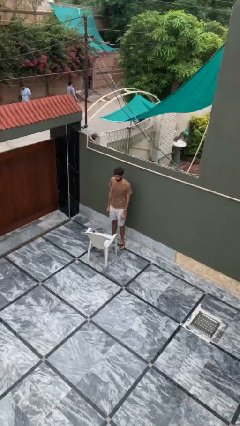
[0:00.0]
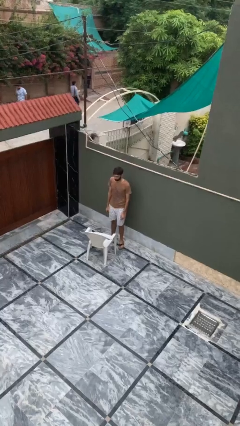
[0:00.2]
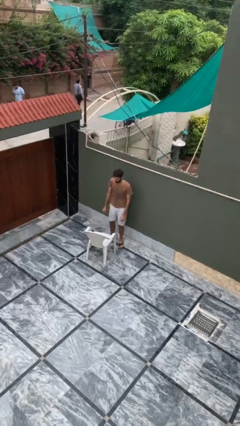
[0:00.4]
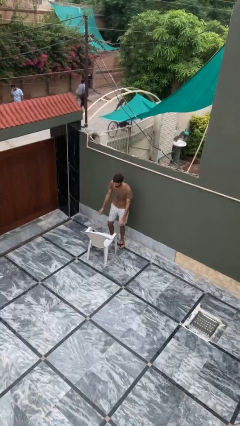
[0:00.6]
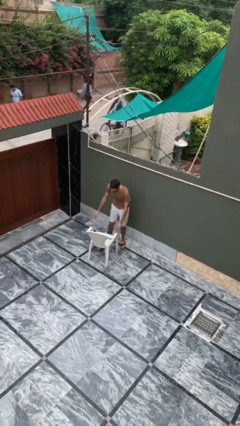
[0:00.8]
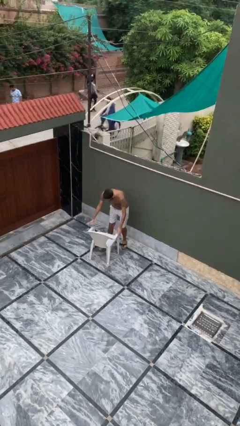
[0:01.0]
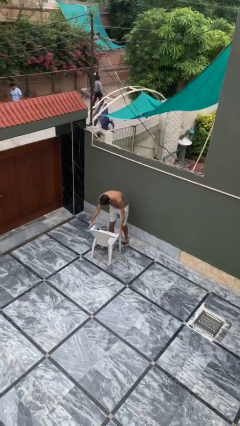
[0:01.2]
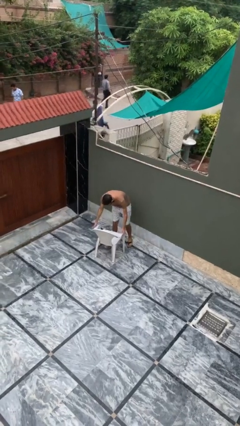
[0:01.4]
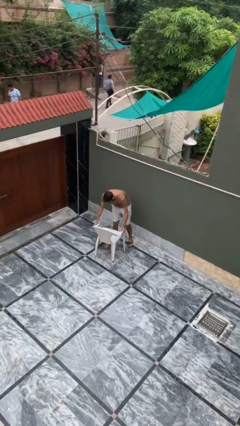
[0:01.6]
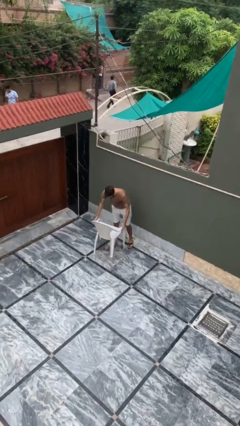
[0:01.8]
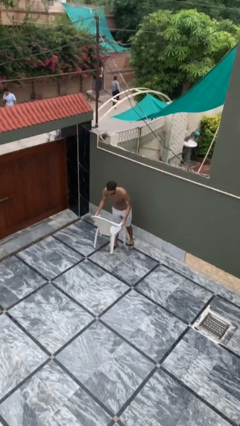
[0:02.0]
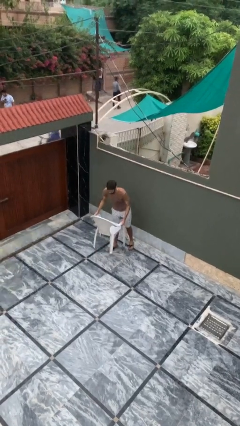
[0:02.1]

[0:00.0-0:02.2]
person picks up object from floor

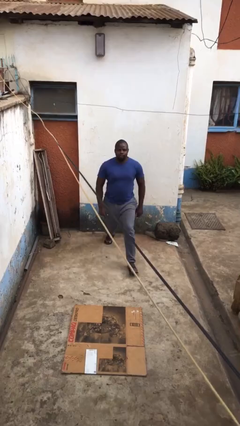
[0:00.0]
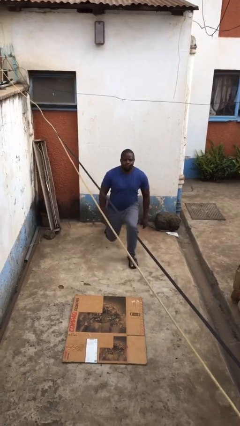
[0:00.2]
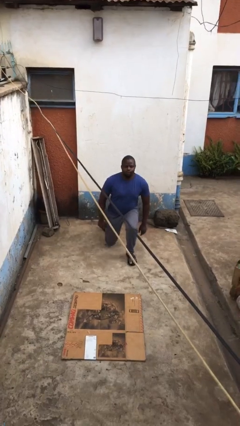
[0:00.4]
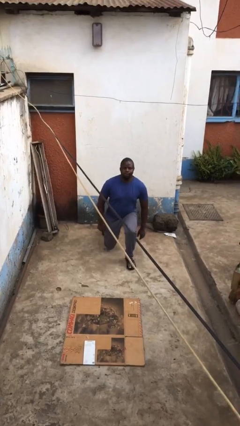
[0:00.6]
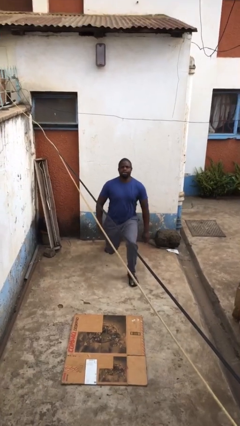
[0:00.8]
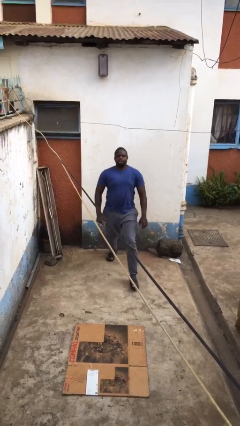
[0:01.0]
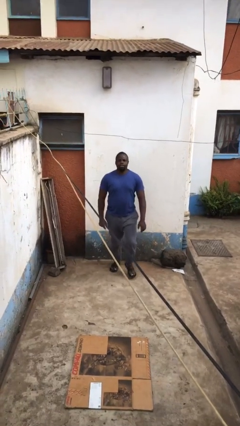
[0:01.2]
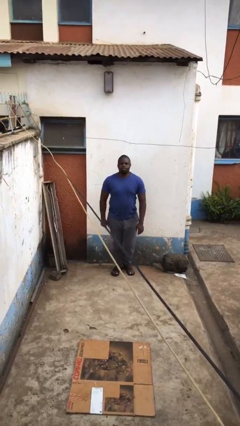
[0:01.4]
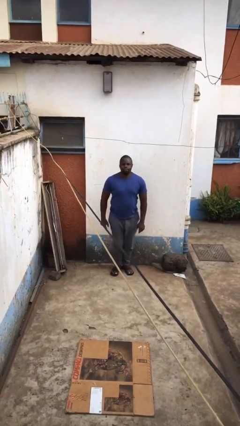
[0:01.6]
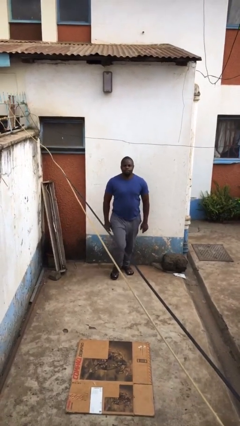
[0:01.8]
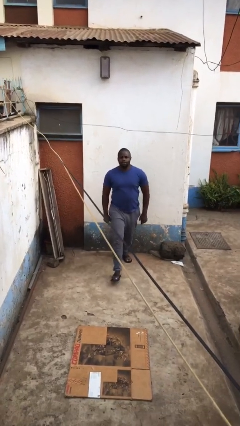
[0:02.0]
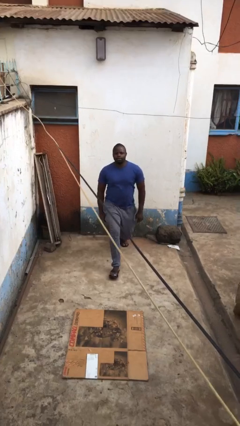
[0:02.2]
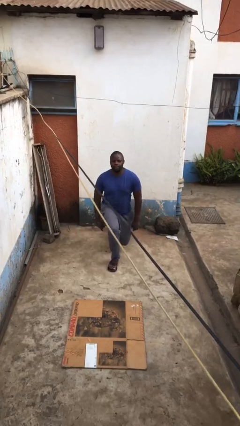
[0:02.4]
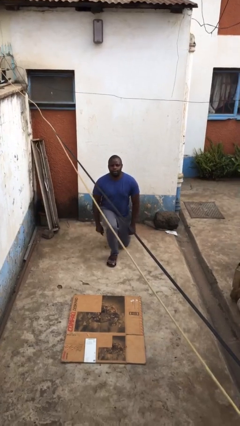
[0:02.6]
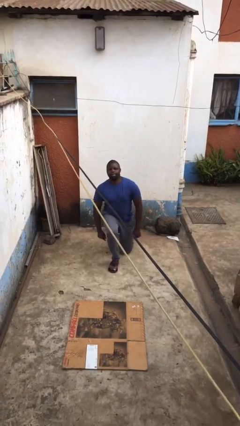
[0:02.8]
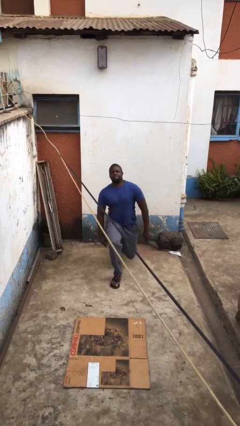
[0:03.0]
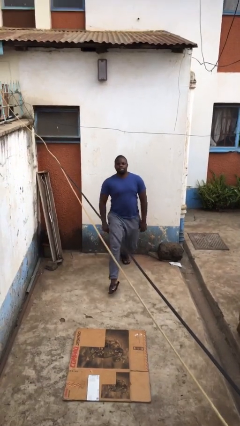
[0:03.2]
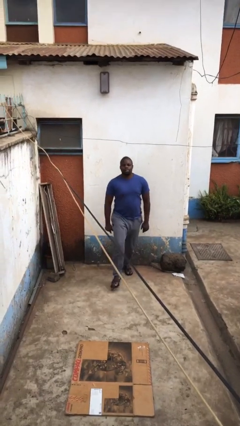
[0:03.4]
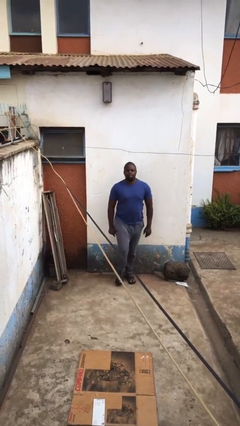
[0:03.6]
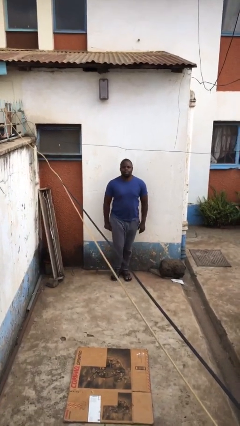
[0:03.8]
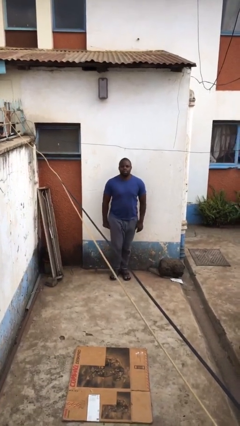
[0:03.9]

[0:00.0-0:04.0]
person exercises with lunges

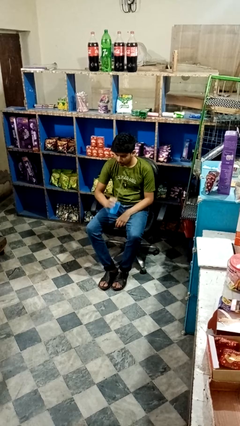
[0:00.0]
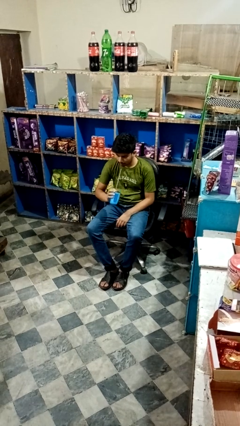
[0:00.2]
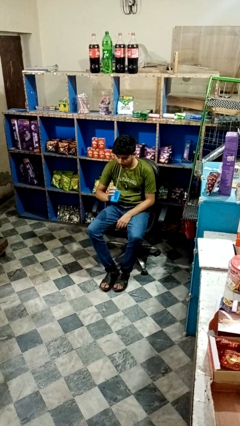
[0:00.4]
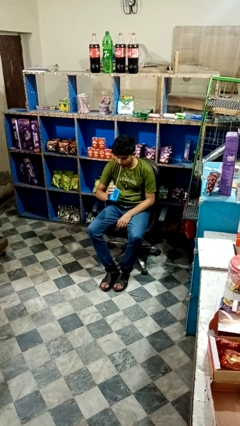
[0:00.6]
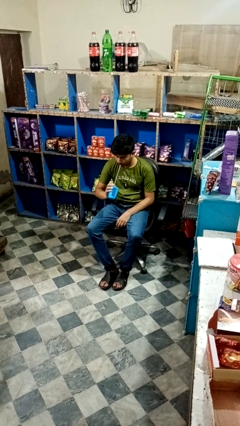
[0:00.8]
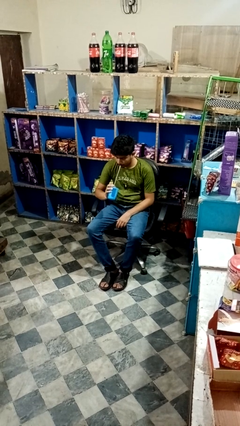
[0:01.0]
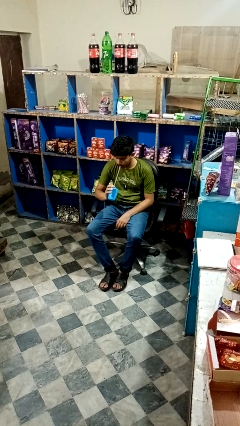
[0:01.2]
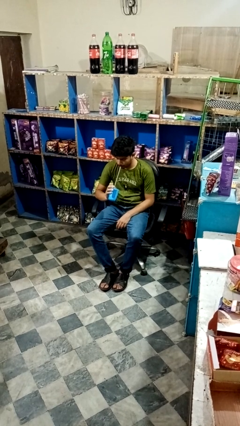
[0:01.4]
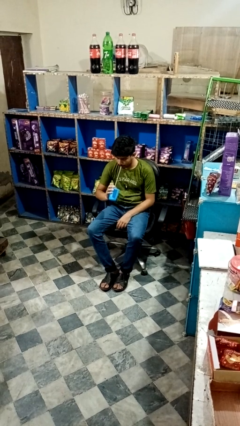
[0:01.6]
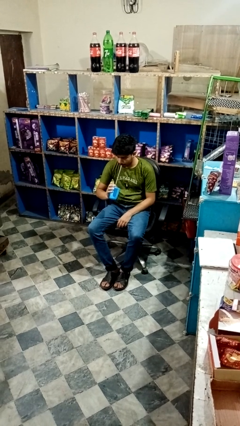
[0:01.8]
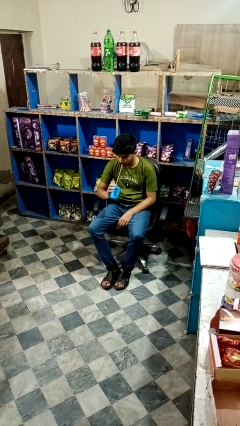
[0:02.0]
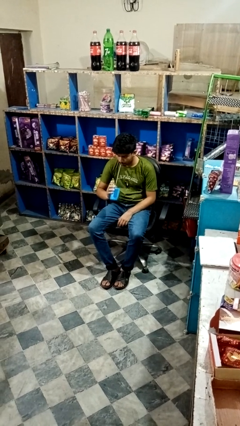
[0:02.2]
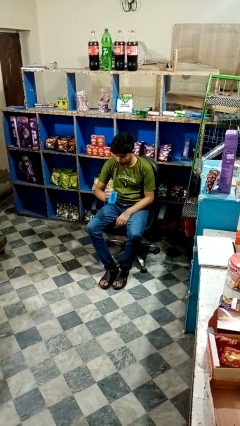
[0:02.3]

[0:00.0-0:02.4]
person drinks from straw

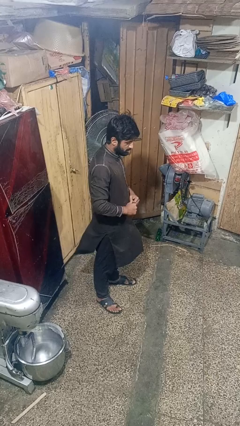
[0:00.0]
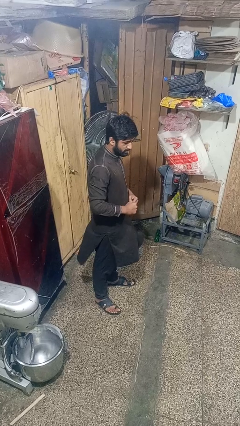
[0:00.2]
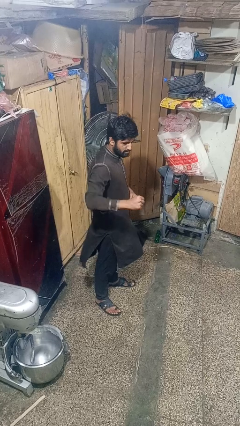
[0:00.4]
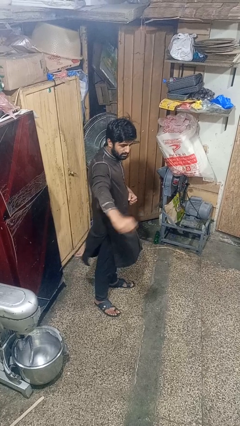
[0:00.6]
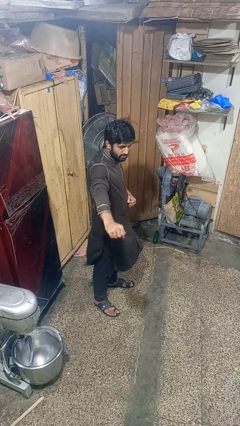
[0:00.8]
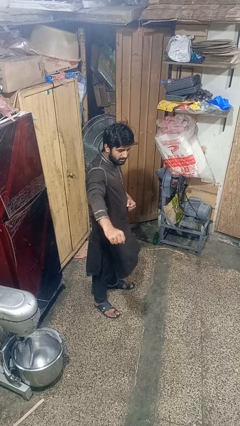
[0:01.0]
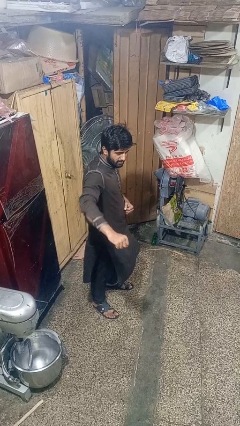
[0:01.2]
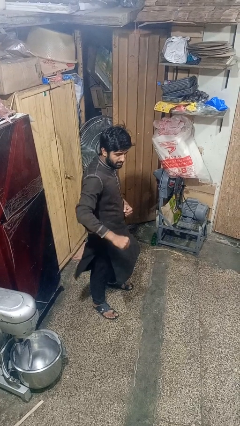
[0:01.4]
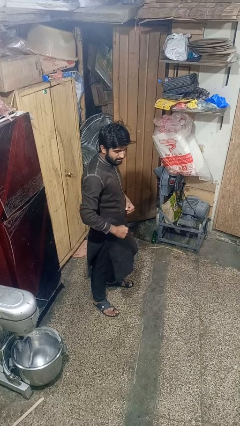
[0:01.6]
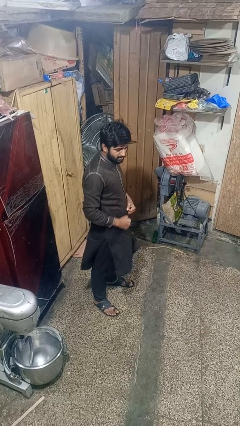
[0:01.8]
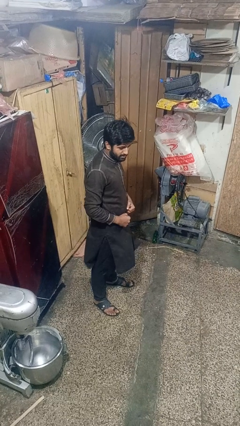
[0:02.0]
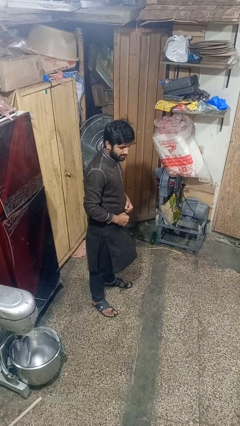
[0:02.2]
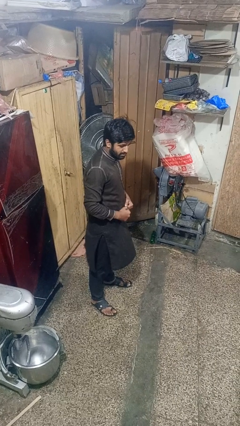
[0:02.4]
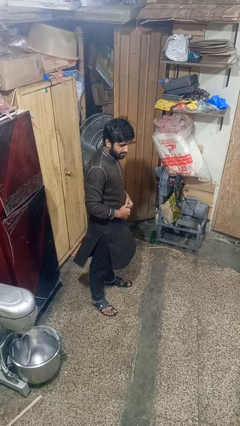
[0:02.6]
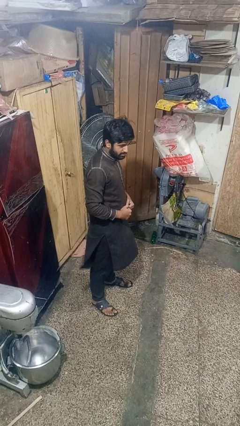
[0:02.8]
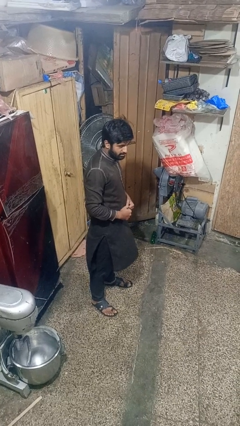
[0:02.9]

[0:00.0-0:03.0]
person karate chop

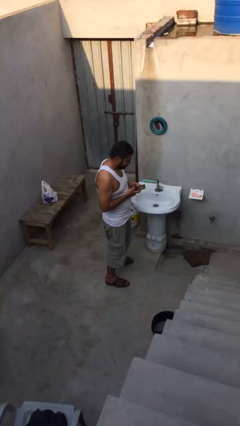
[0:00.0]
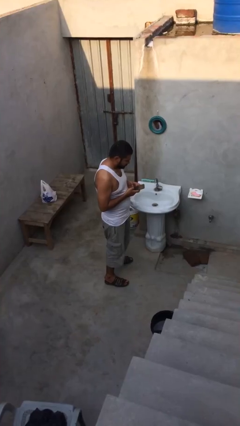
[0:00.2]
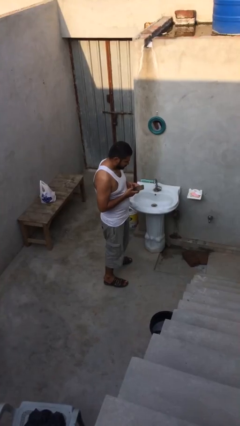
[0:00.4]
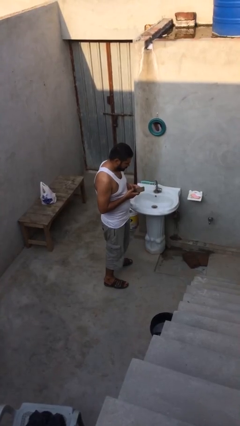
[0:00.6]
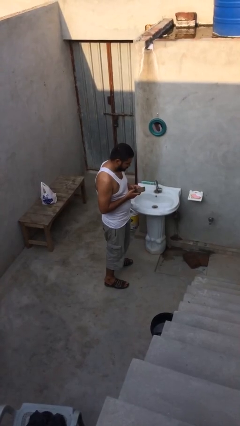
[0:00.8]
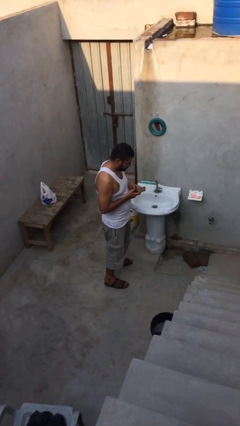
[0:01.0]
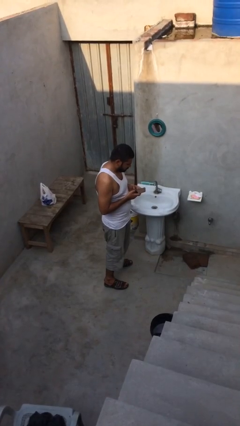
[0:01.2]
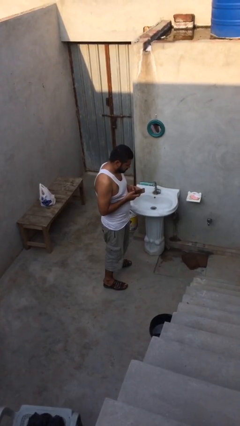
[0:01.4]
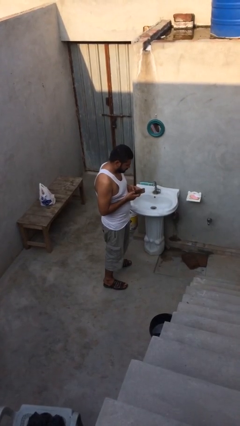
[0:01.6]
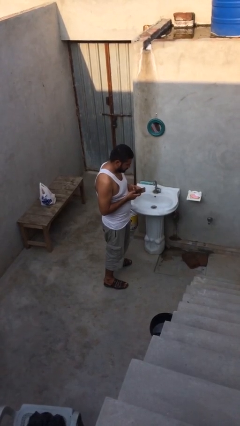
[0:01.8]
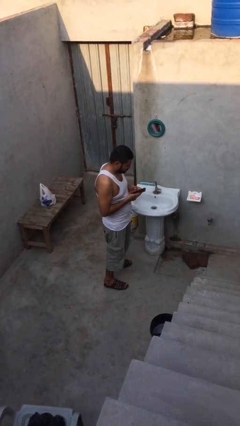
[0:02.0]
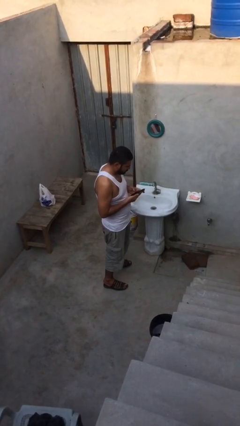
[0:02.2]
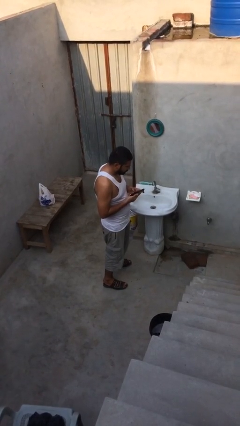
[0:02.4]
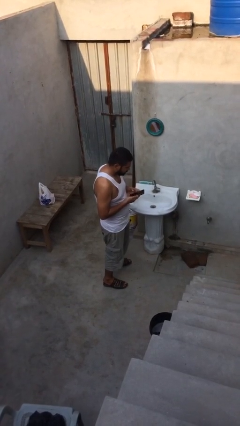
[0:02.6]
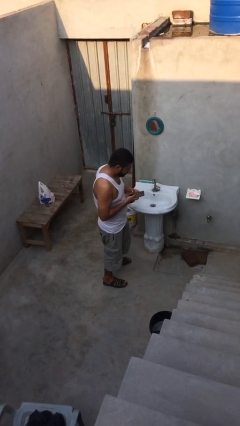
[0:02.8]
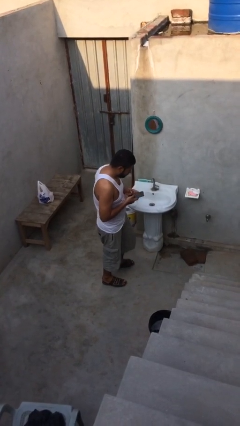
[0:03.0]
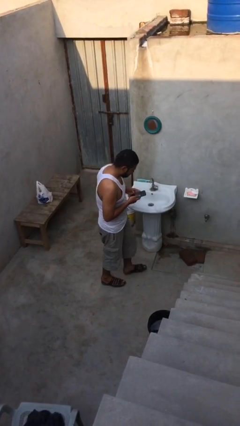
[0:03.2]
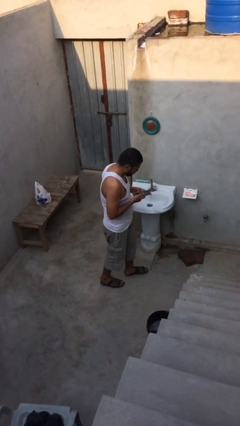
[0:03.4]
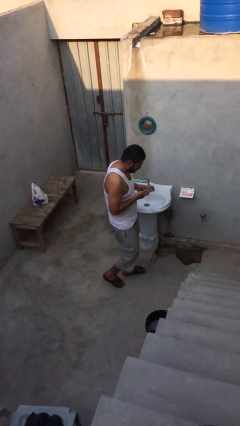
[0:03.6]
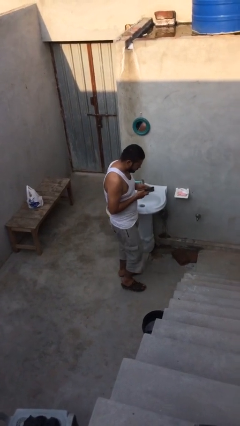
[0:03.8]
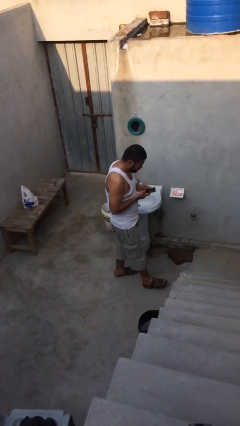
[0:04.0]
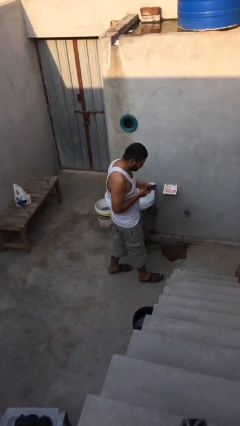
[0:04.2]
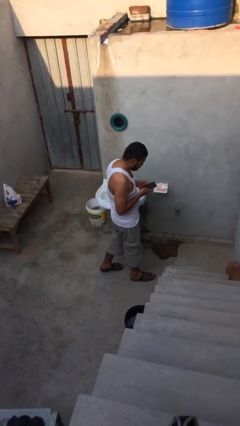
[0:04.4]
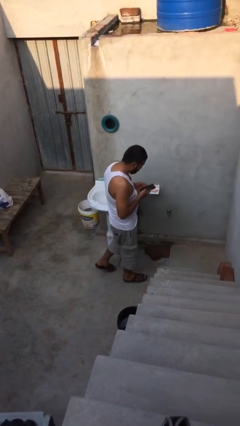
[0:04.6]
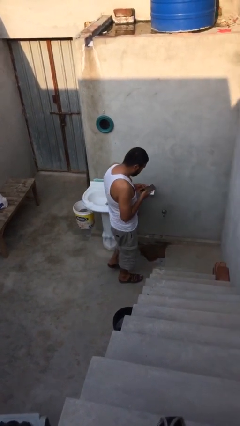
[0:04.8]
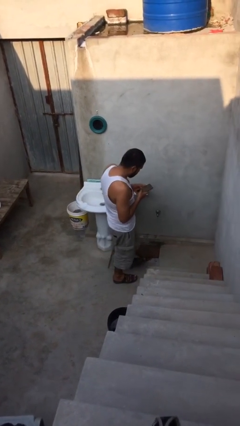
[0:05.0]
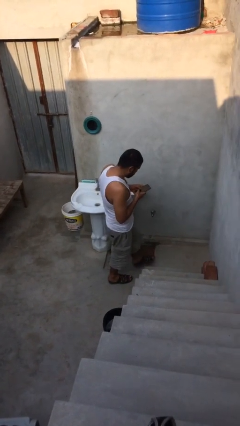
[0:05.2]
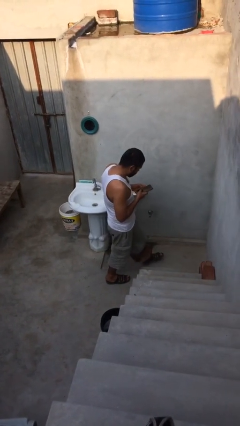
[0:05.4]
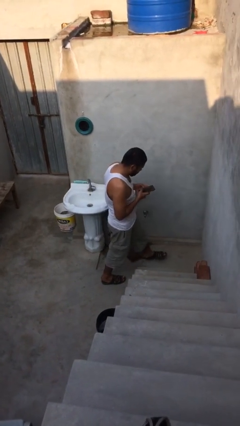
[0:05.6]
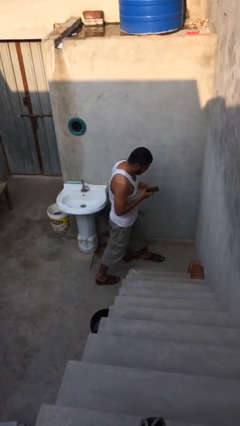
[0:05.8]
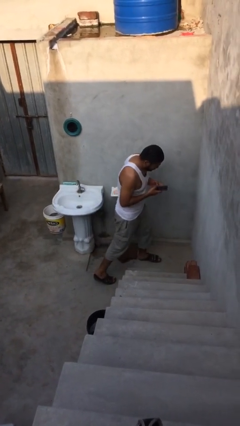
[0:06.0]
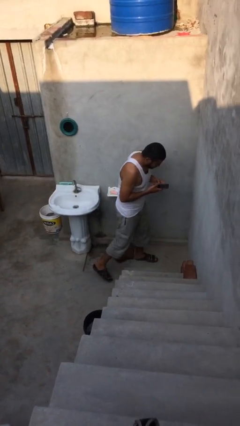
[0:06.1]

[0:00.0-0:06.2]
person texts on phone
